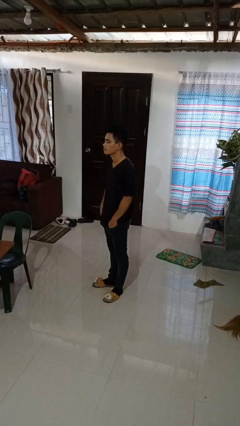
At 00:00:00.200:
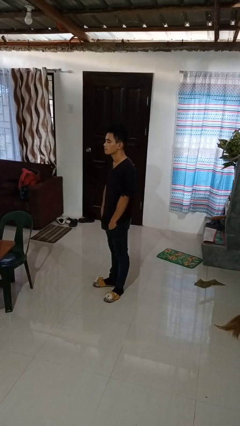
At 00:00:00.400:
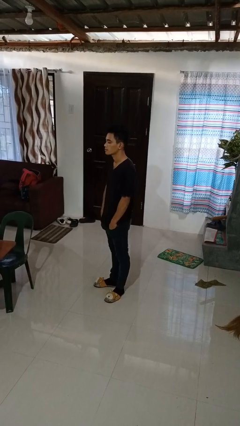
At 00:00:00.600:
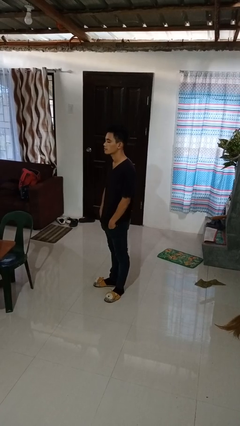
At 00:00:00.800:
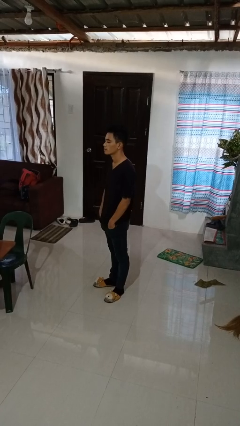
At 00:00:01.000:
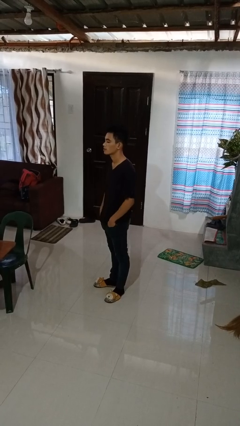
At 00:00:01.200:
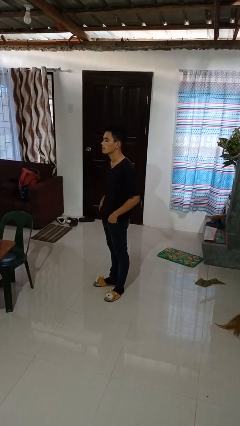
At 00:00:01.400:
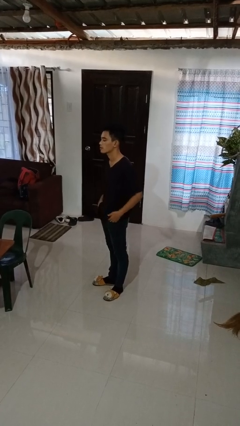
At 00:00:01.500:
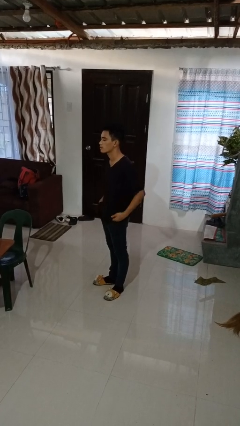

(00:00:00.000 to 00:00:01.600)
person puts hands in back pockets

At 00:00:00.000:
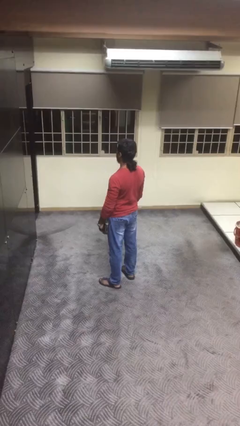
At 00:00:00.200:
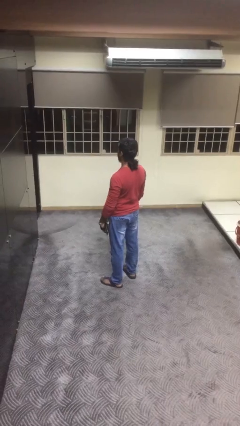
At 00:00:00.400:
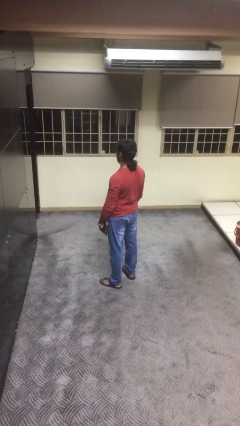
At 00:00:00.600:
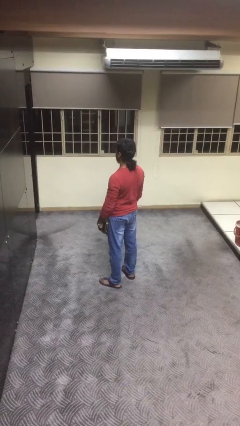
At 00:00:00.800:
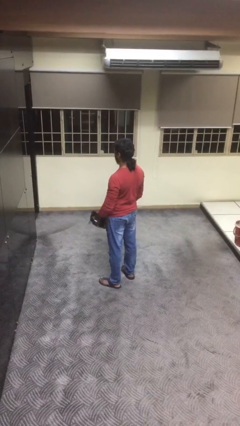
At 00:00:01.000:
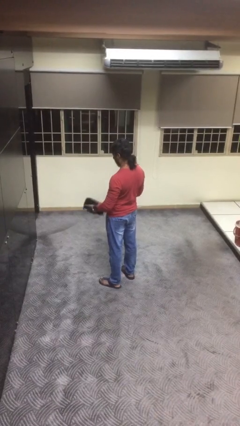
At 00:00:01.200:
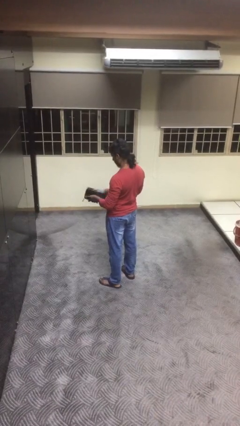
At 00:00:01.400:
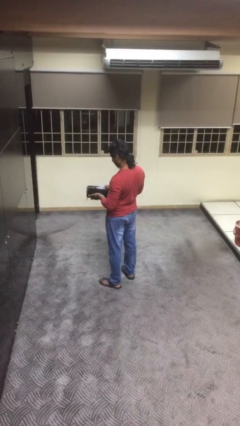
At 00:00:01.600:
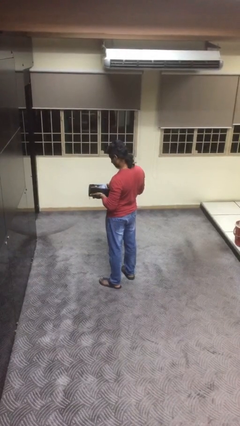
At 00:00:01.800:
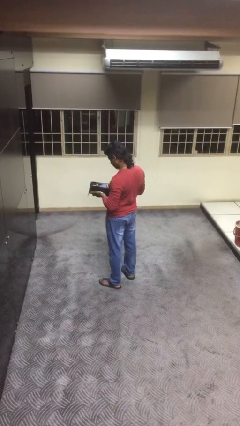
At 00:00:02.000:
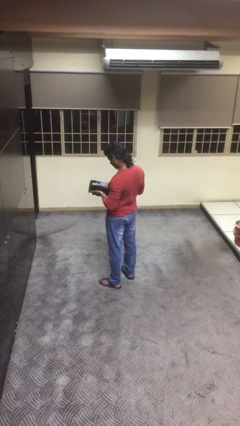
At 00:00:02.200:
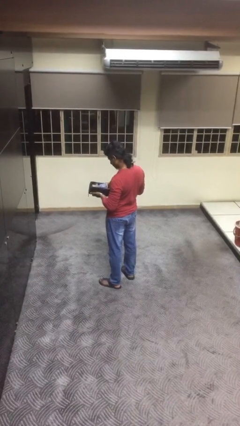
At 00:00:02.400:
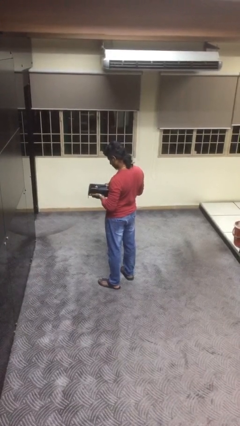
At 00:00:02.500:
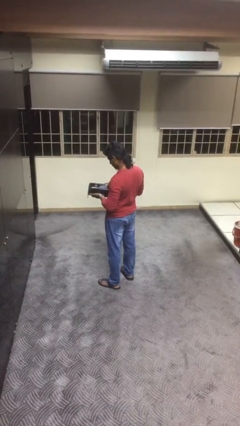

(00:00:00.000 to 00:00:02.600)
person searches in purse

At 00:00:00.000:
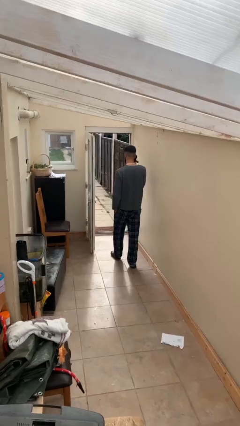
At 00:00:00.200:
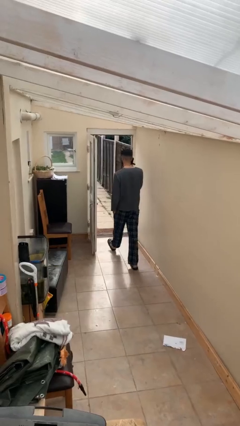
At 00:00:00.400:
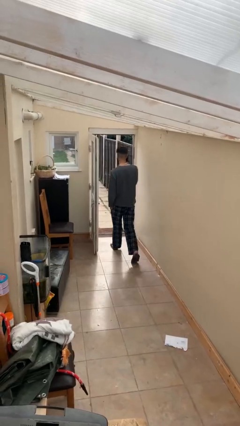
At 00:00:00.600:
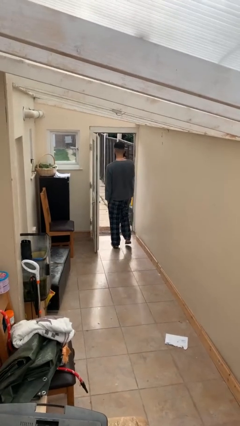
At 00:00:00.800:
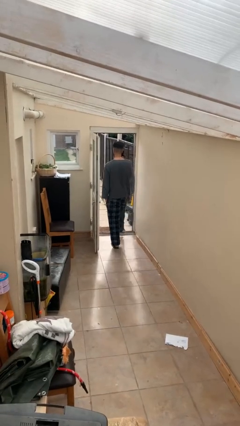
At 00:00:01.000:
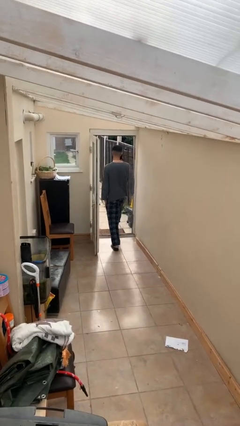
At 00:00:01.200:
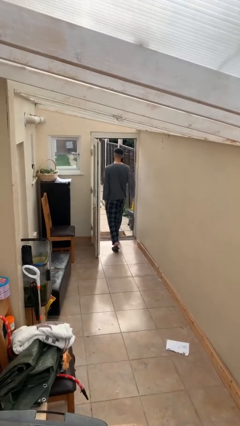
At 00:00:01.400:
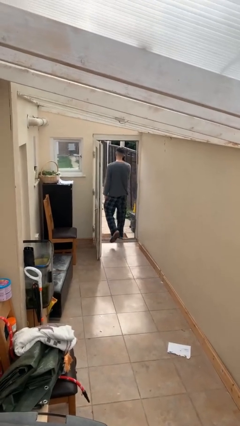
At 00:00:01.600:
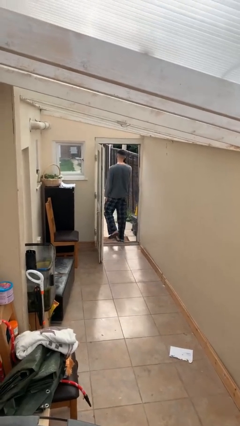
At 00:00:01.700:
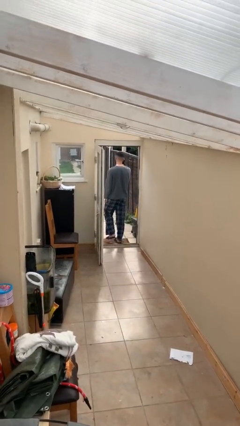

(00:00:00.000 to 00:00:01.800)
person exits scene through structure

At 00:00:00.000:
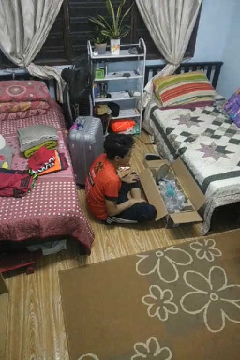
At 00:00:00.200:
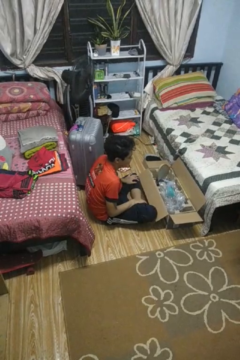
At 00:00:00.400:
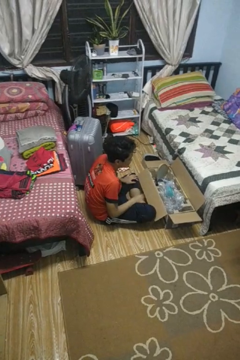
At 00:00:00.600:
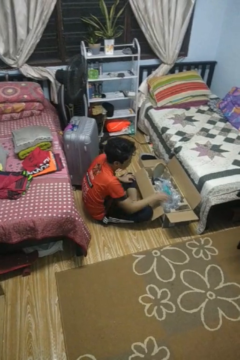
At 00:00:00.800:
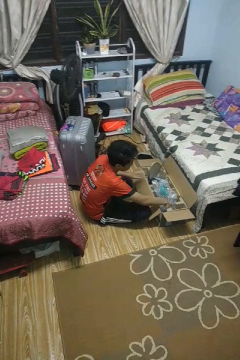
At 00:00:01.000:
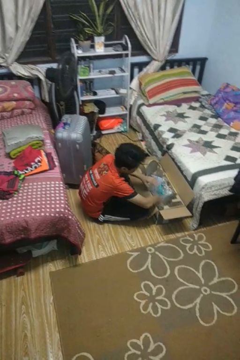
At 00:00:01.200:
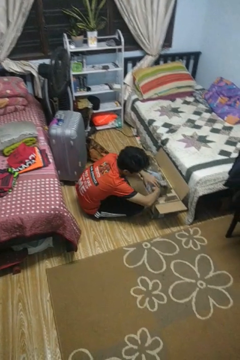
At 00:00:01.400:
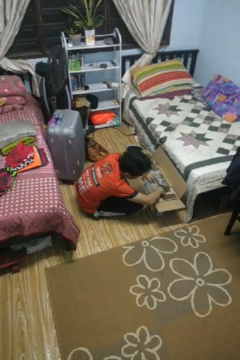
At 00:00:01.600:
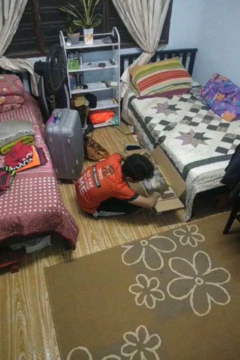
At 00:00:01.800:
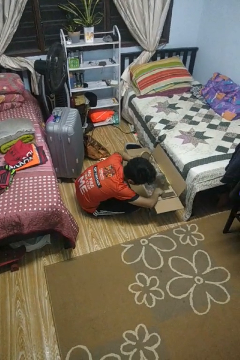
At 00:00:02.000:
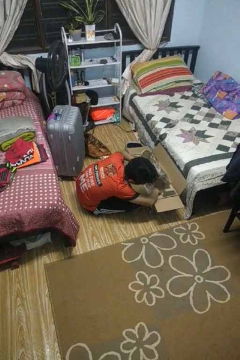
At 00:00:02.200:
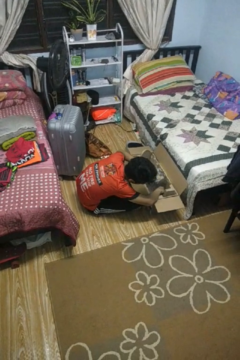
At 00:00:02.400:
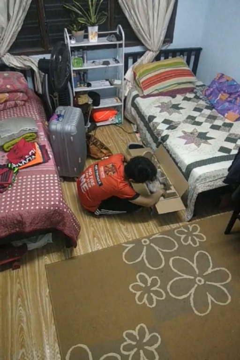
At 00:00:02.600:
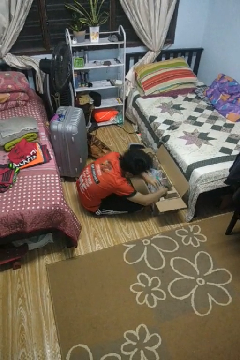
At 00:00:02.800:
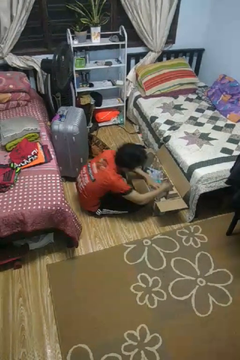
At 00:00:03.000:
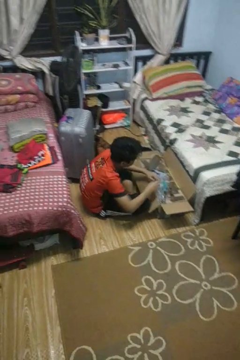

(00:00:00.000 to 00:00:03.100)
person searches in box

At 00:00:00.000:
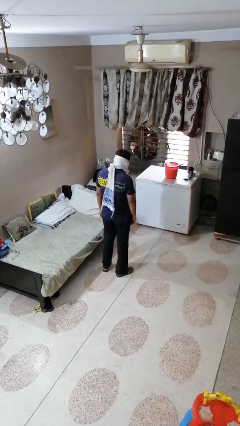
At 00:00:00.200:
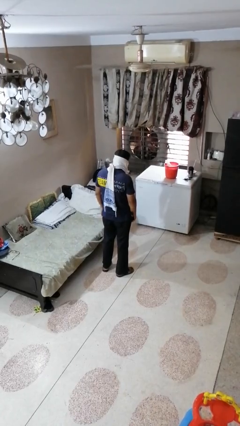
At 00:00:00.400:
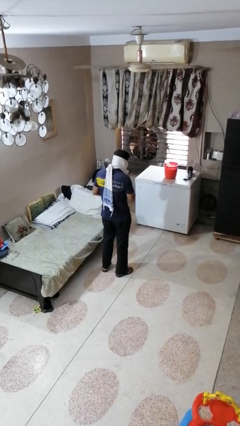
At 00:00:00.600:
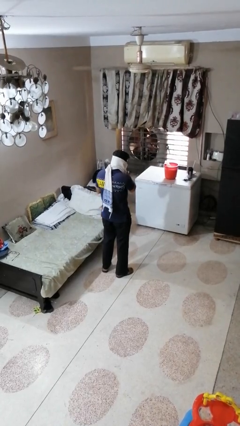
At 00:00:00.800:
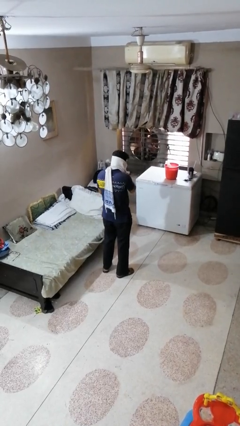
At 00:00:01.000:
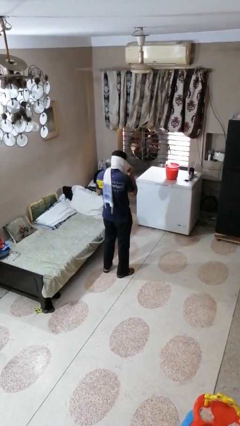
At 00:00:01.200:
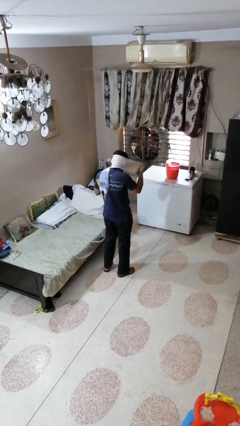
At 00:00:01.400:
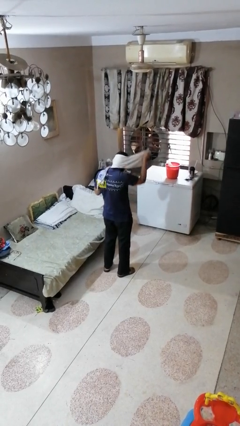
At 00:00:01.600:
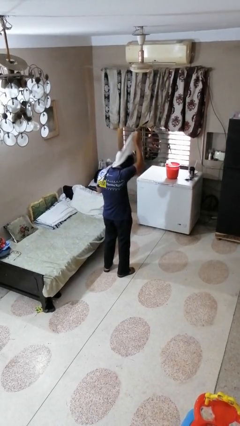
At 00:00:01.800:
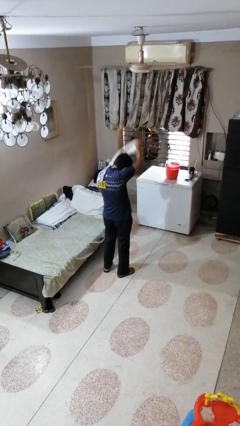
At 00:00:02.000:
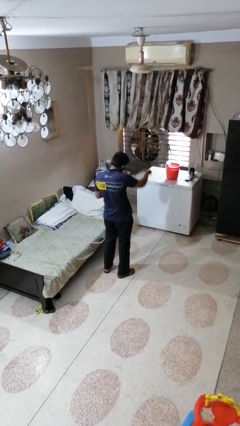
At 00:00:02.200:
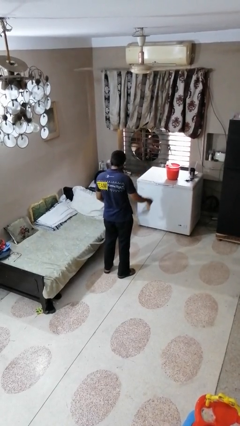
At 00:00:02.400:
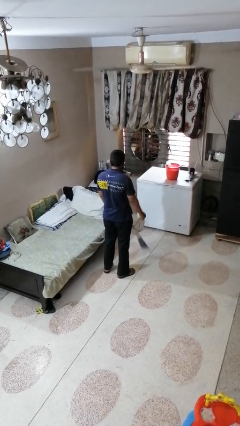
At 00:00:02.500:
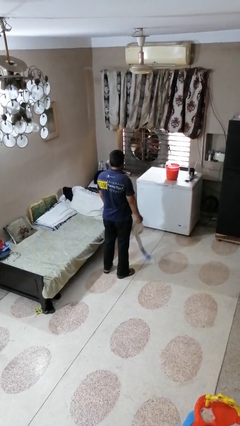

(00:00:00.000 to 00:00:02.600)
person takes off scarf

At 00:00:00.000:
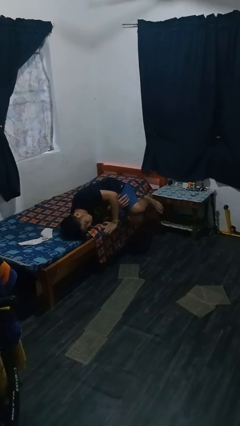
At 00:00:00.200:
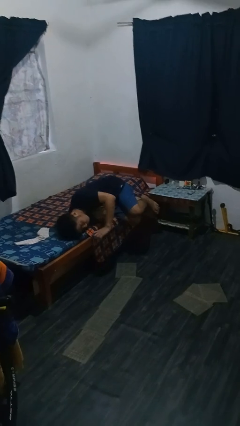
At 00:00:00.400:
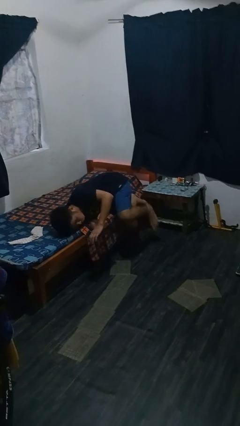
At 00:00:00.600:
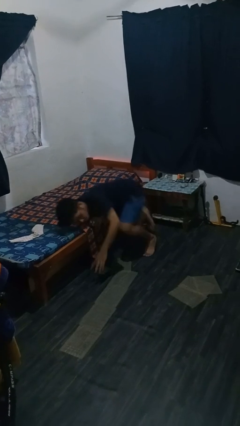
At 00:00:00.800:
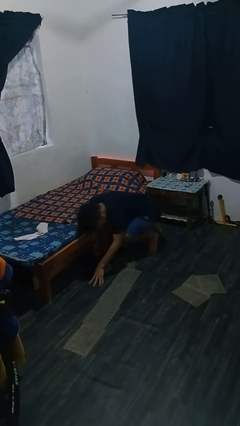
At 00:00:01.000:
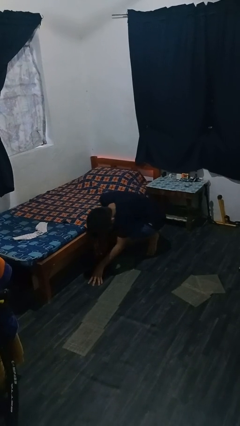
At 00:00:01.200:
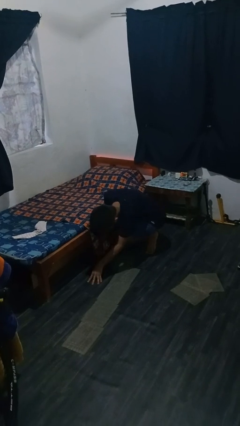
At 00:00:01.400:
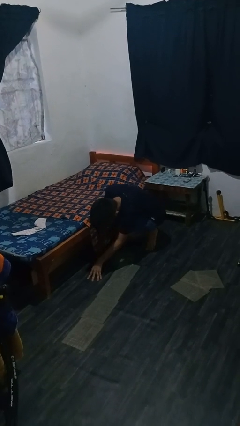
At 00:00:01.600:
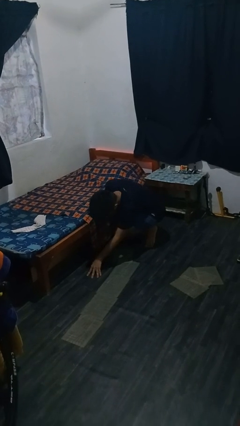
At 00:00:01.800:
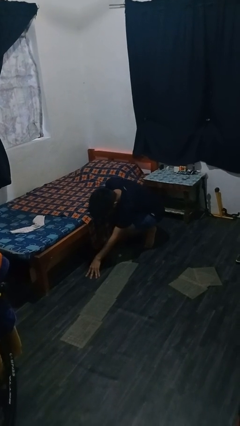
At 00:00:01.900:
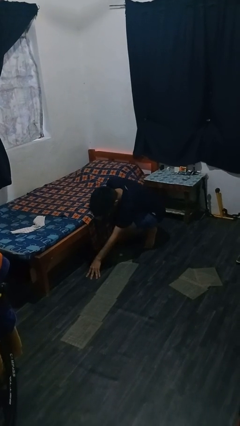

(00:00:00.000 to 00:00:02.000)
person falls from bed

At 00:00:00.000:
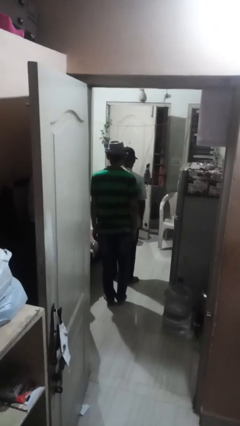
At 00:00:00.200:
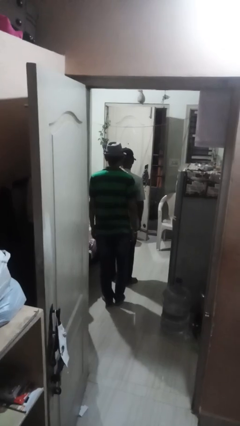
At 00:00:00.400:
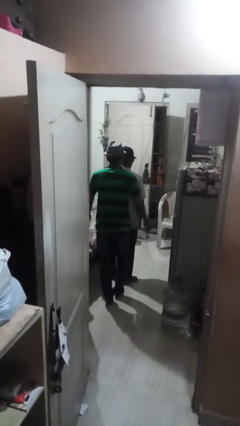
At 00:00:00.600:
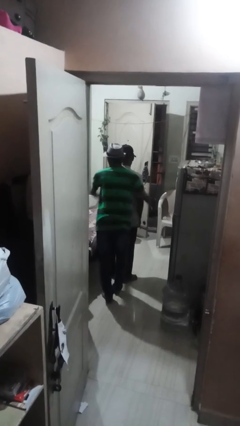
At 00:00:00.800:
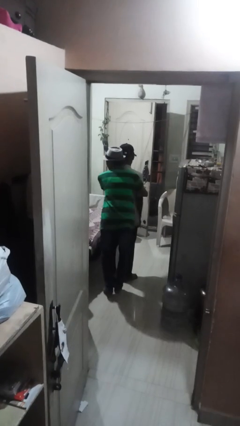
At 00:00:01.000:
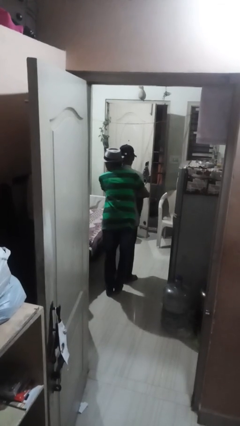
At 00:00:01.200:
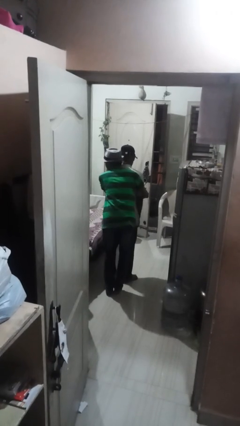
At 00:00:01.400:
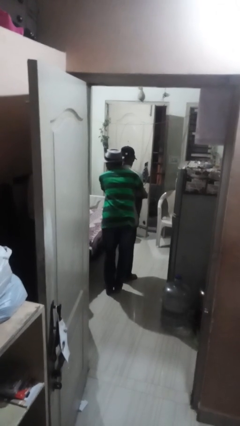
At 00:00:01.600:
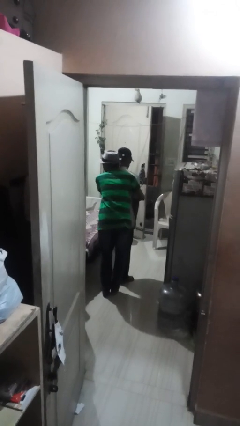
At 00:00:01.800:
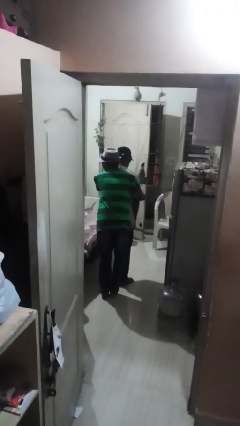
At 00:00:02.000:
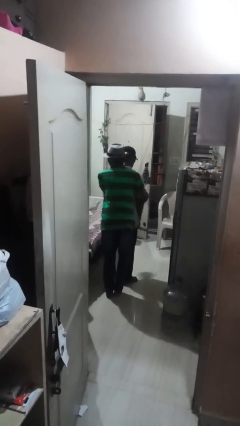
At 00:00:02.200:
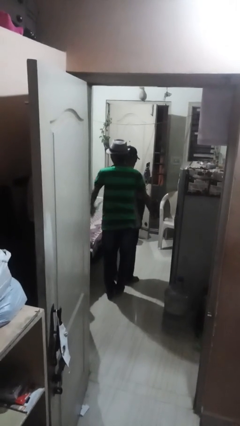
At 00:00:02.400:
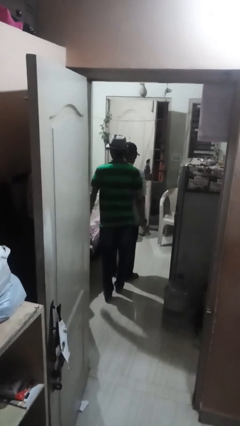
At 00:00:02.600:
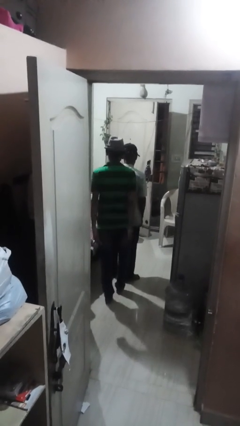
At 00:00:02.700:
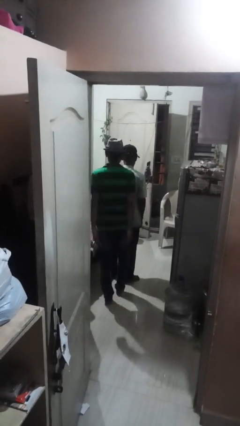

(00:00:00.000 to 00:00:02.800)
person hugs person from behind

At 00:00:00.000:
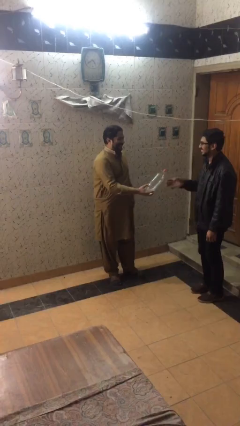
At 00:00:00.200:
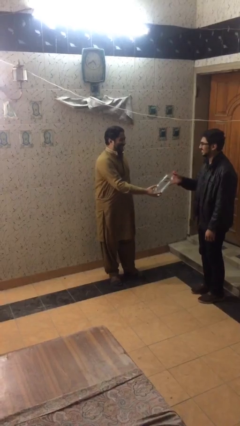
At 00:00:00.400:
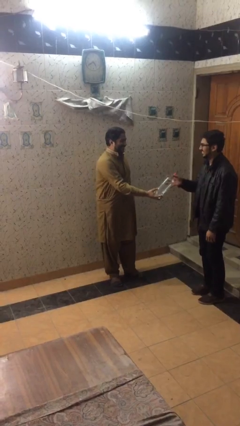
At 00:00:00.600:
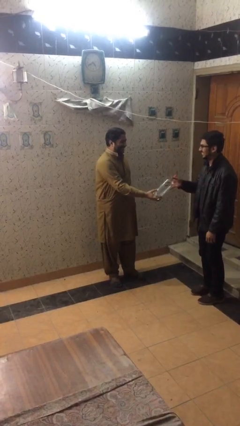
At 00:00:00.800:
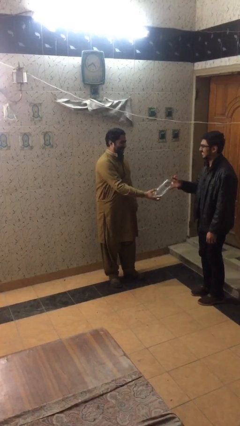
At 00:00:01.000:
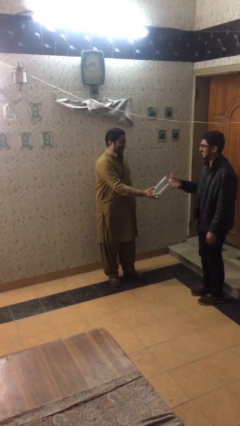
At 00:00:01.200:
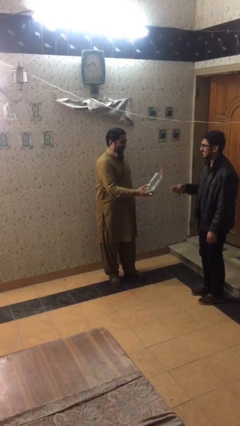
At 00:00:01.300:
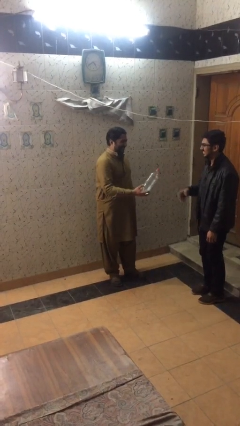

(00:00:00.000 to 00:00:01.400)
person transfers object to person
